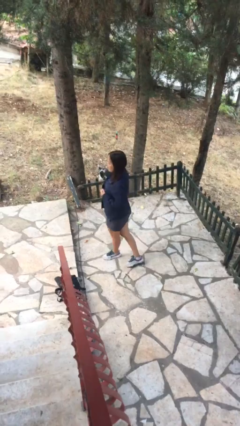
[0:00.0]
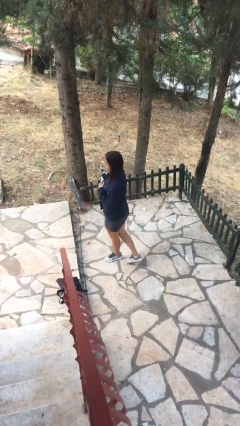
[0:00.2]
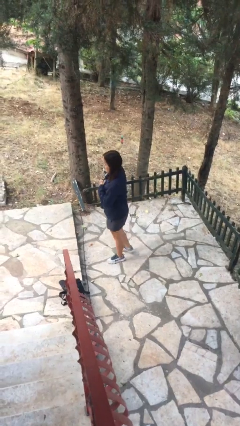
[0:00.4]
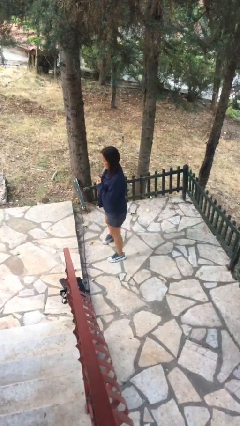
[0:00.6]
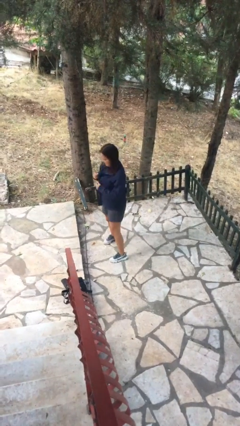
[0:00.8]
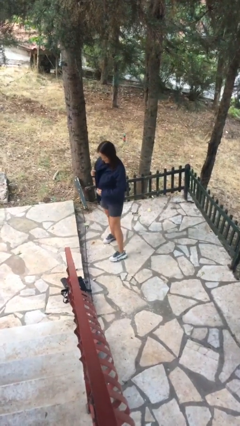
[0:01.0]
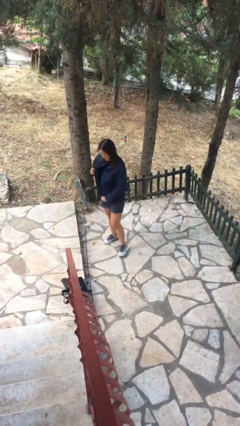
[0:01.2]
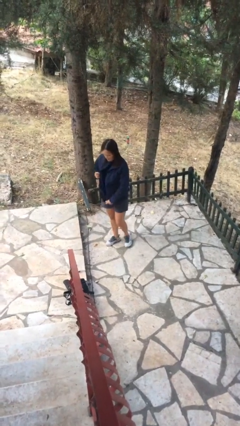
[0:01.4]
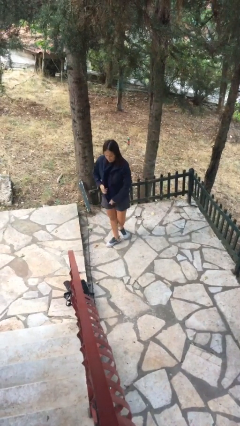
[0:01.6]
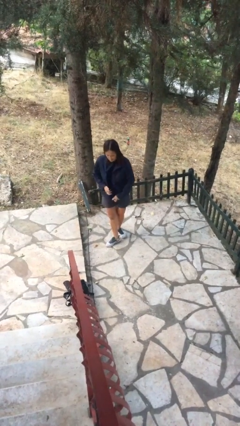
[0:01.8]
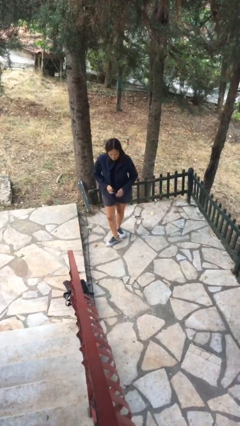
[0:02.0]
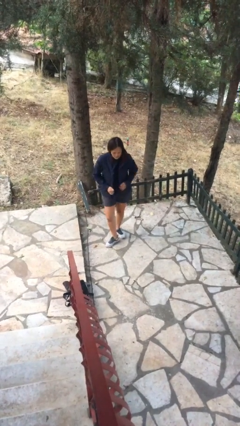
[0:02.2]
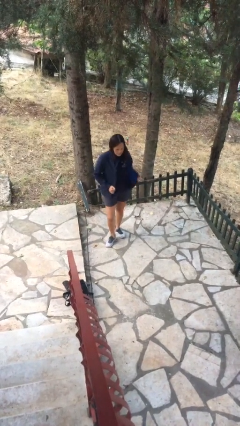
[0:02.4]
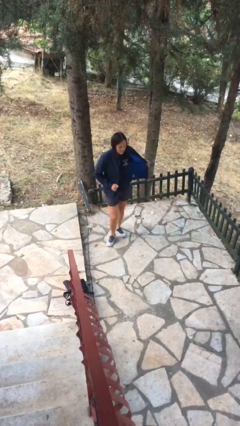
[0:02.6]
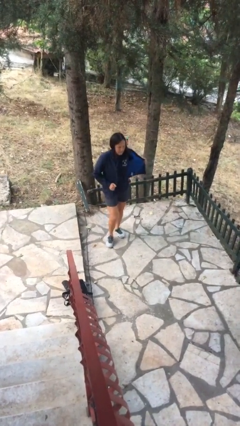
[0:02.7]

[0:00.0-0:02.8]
person unzips jacket

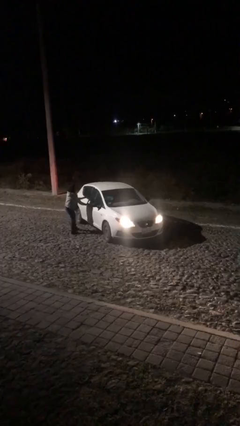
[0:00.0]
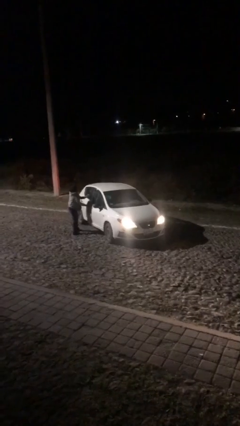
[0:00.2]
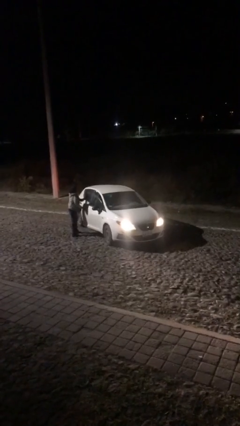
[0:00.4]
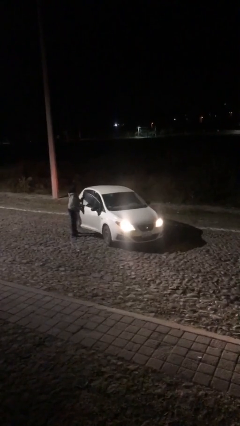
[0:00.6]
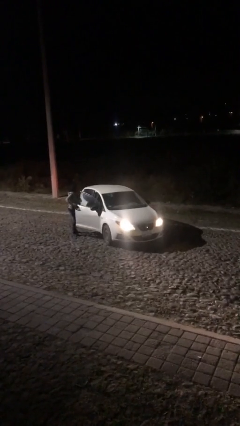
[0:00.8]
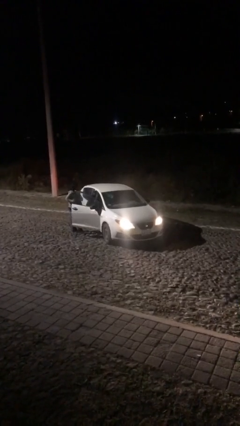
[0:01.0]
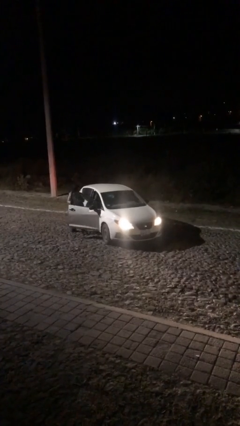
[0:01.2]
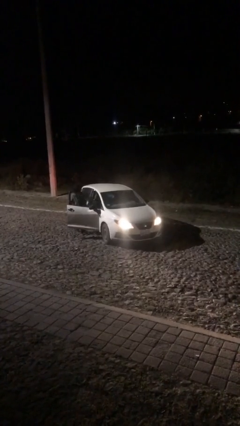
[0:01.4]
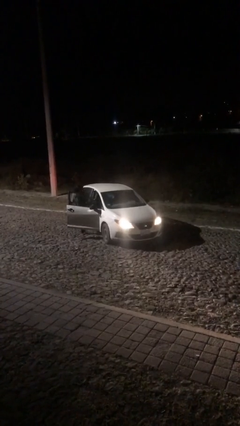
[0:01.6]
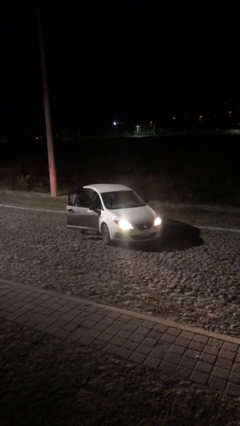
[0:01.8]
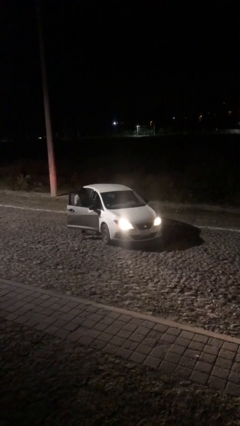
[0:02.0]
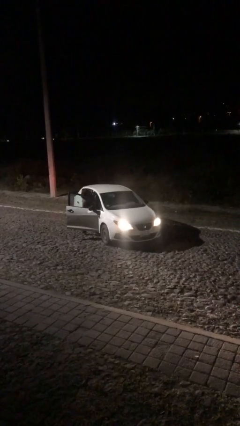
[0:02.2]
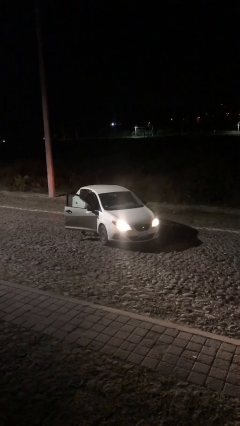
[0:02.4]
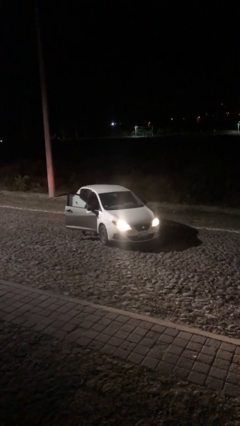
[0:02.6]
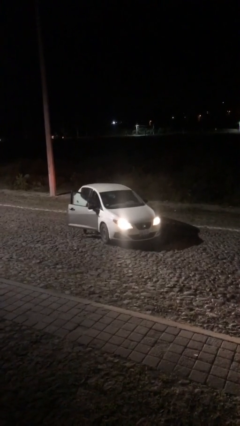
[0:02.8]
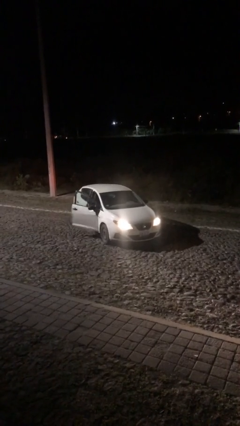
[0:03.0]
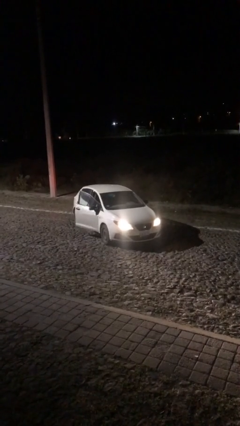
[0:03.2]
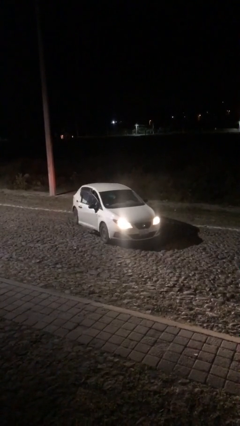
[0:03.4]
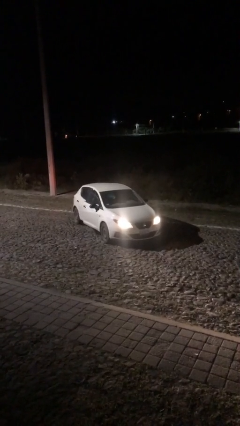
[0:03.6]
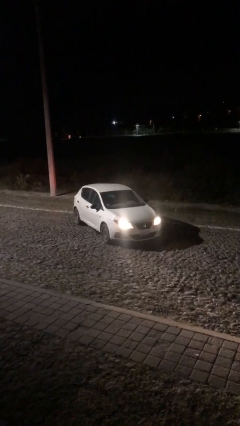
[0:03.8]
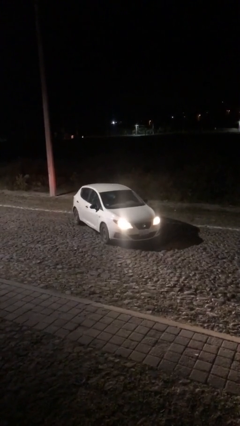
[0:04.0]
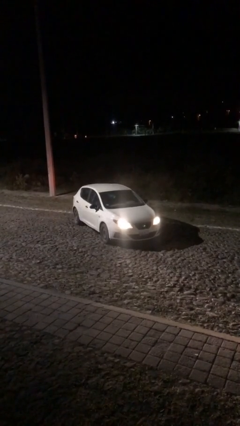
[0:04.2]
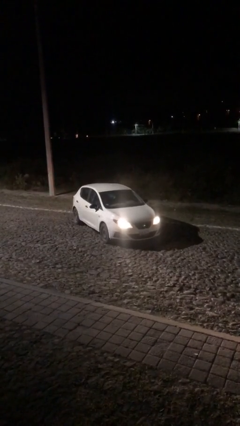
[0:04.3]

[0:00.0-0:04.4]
car picks up person

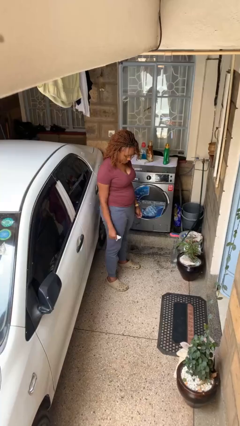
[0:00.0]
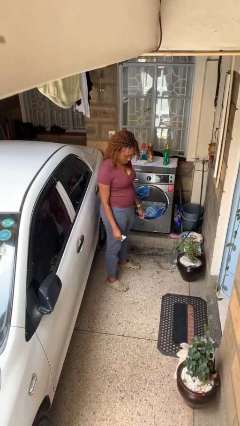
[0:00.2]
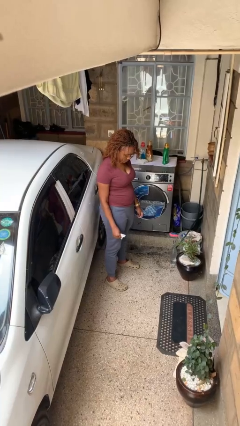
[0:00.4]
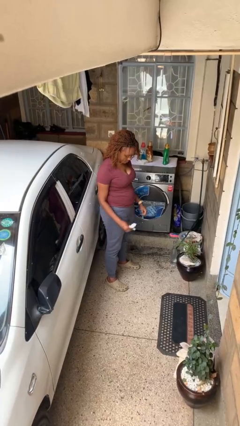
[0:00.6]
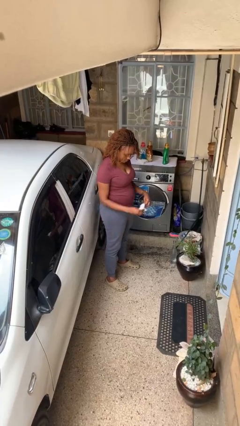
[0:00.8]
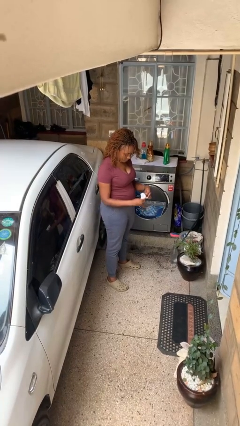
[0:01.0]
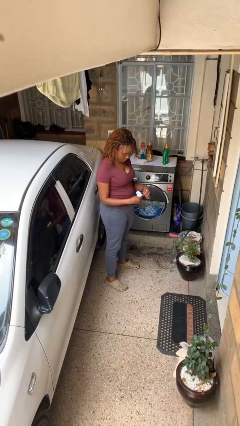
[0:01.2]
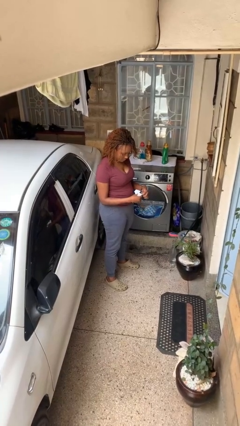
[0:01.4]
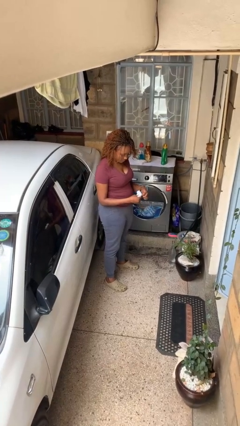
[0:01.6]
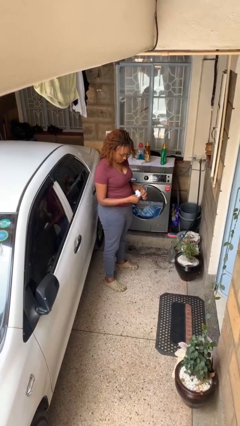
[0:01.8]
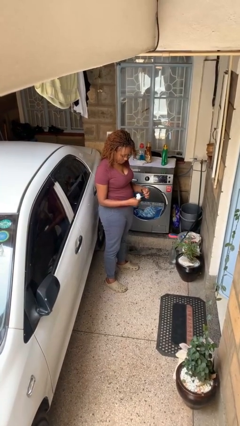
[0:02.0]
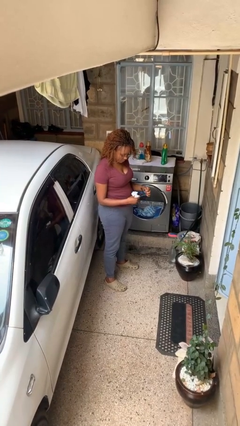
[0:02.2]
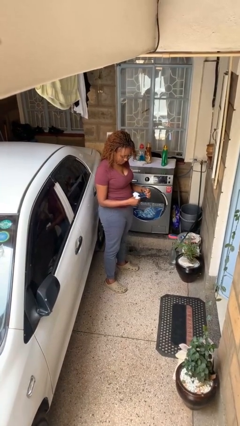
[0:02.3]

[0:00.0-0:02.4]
person cleans eyeglasses

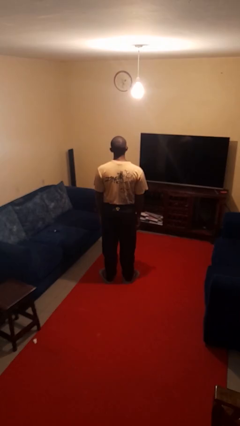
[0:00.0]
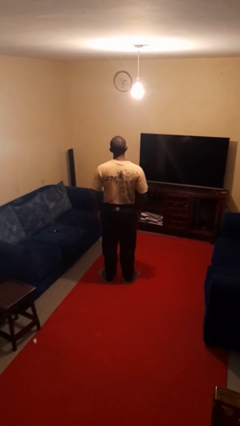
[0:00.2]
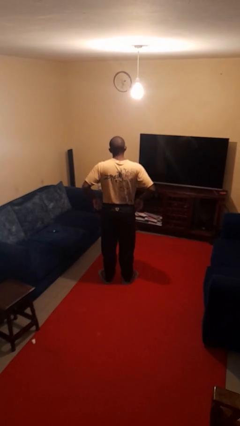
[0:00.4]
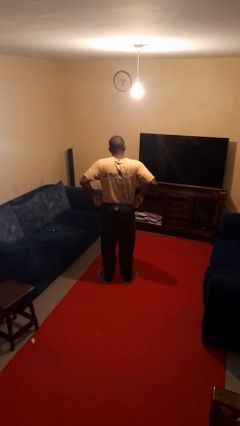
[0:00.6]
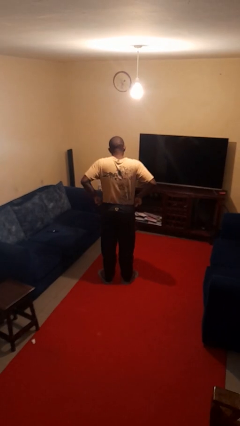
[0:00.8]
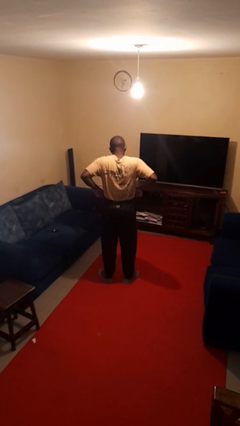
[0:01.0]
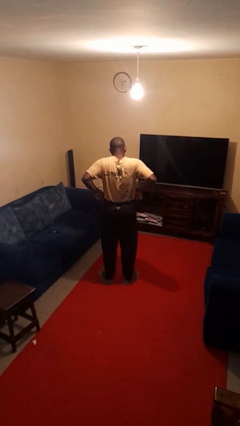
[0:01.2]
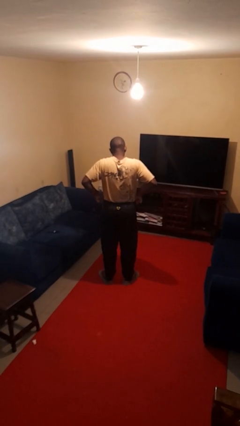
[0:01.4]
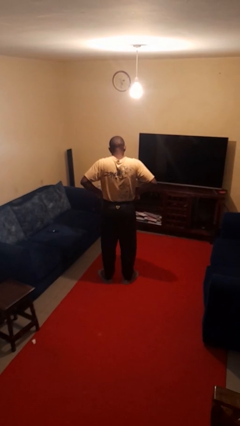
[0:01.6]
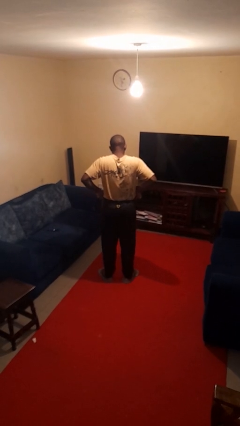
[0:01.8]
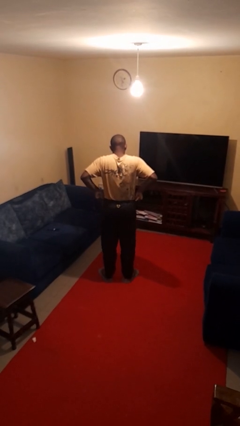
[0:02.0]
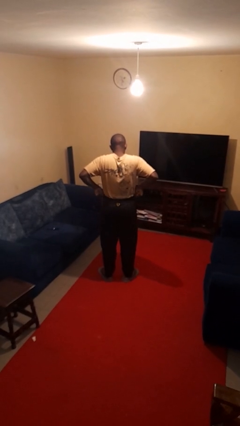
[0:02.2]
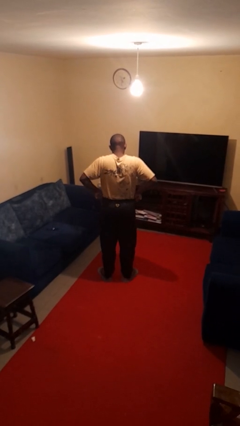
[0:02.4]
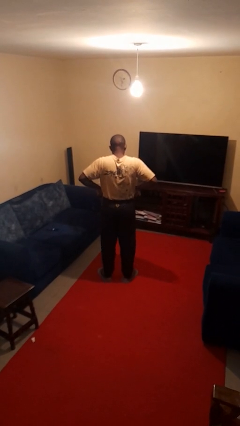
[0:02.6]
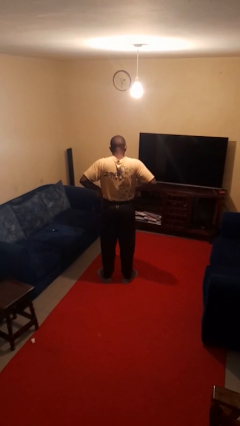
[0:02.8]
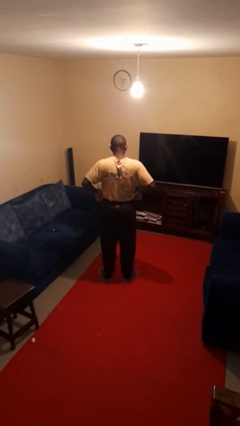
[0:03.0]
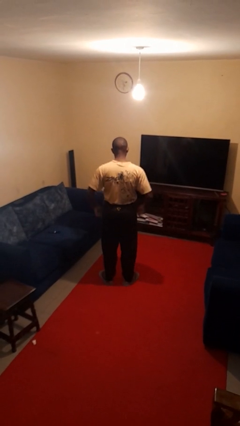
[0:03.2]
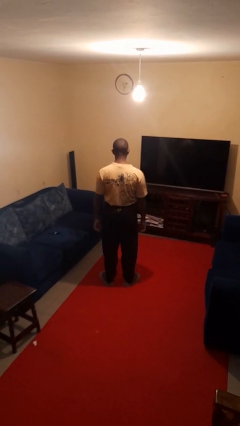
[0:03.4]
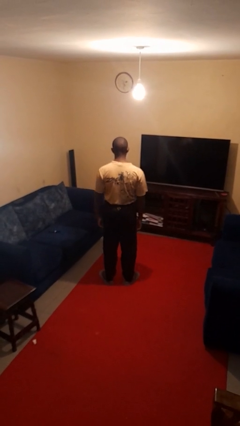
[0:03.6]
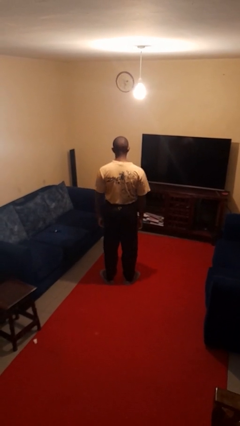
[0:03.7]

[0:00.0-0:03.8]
person hikes up pants

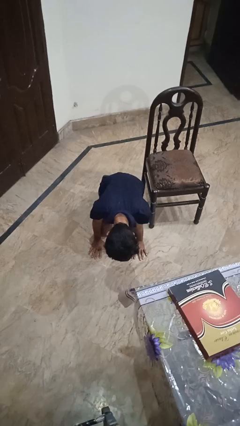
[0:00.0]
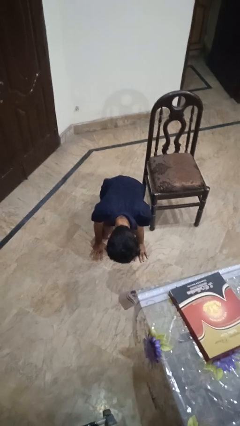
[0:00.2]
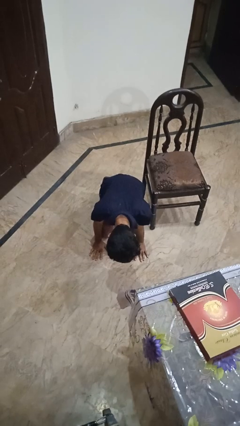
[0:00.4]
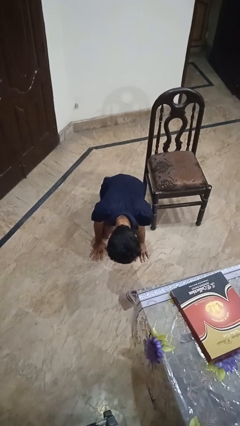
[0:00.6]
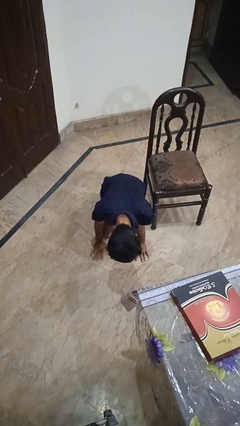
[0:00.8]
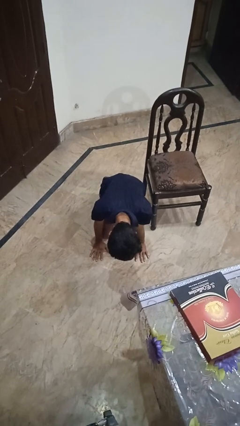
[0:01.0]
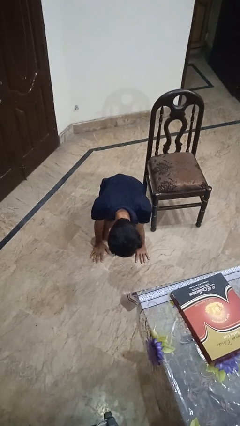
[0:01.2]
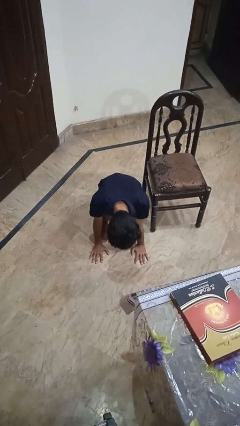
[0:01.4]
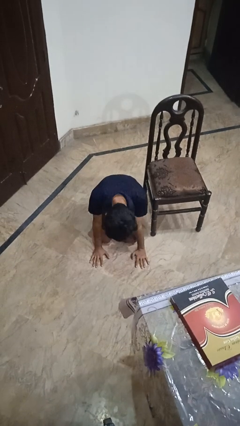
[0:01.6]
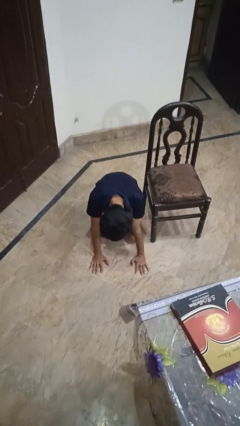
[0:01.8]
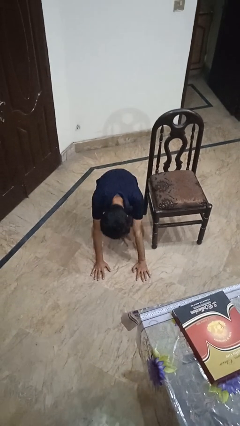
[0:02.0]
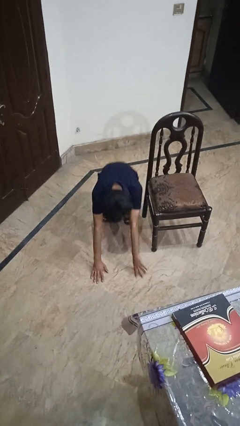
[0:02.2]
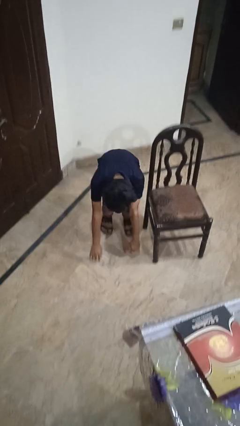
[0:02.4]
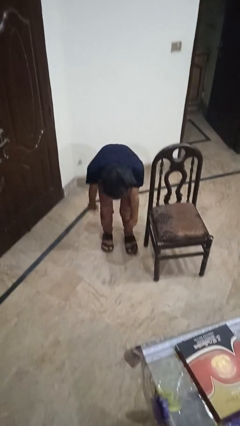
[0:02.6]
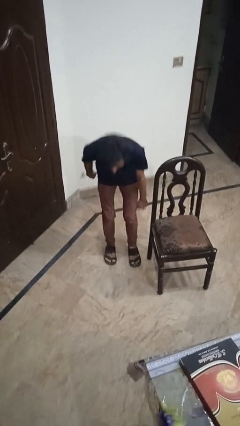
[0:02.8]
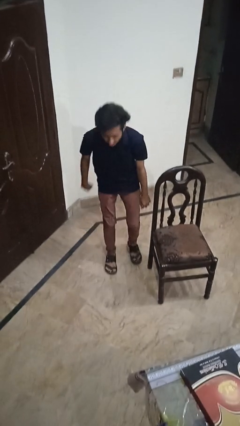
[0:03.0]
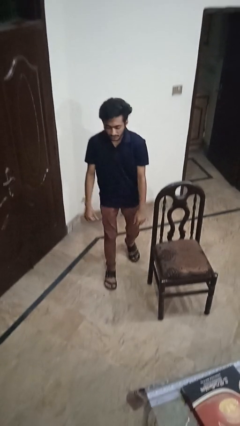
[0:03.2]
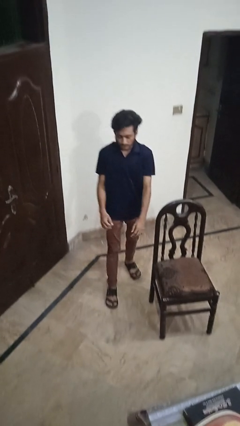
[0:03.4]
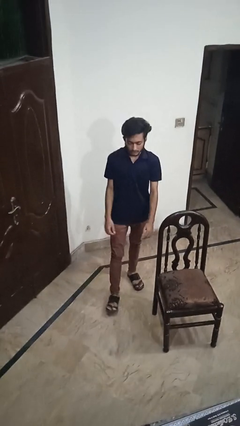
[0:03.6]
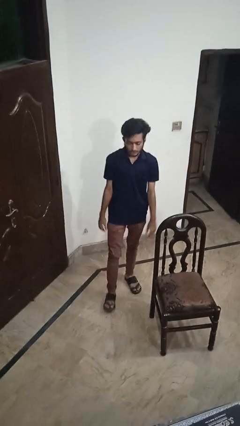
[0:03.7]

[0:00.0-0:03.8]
person stands up from floor

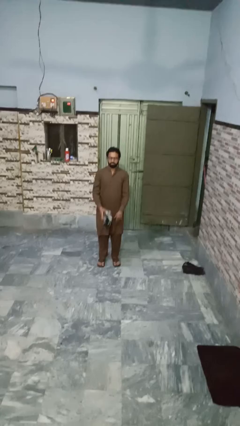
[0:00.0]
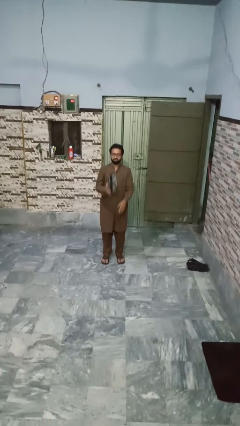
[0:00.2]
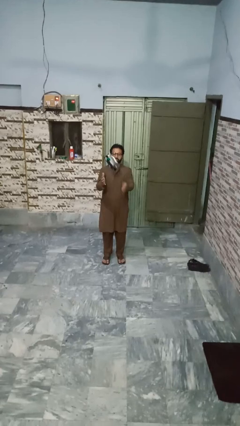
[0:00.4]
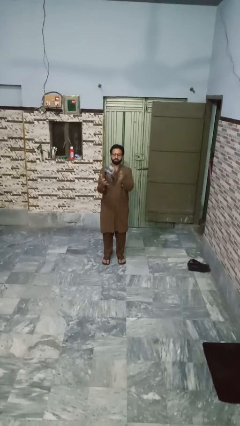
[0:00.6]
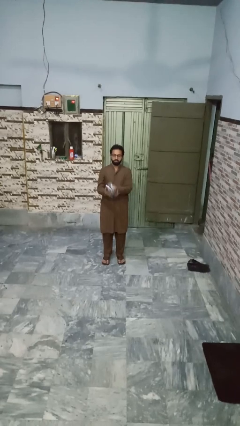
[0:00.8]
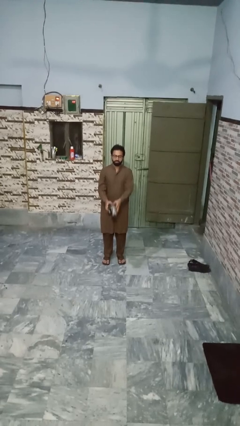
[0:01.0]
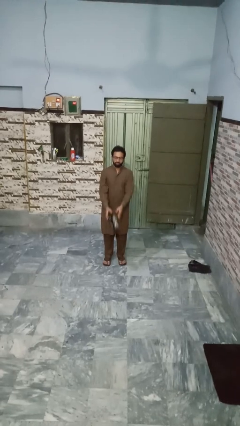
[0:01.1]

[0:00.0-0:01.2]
person drops object
